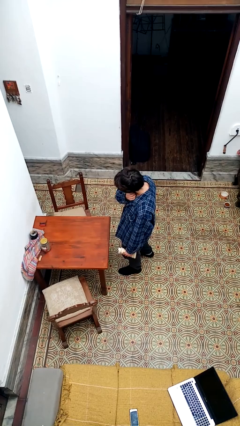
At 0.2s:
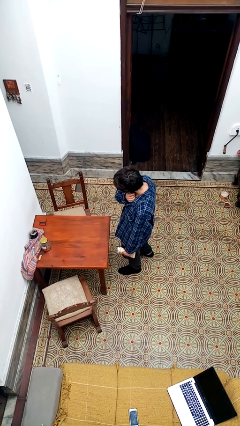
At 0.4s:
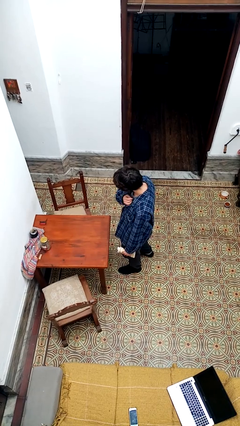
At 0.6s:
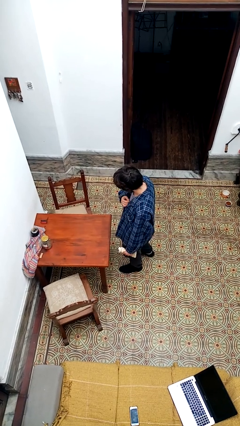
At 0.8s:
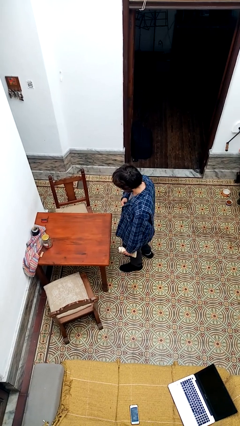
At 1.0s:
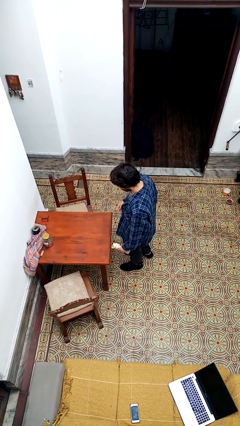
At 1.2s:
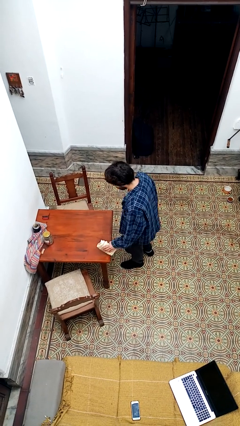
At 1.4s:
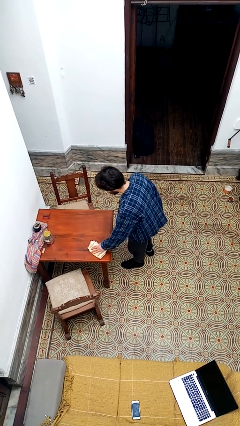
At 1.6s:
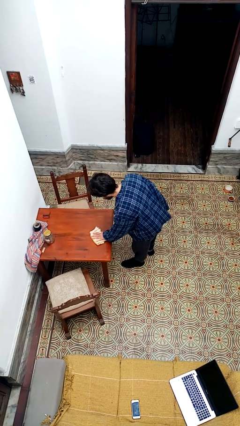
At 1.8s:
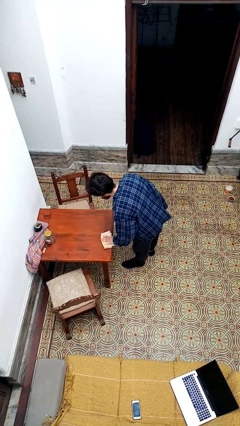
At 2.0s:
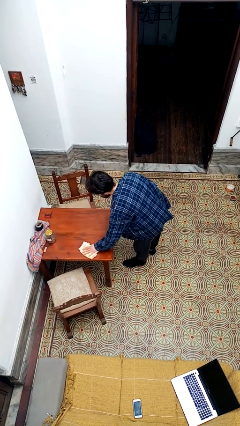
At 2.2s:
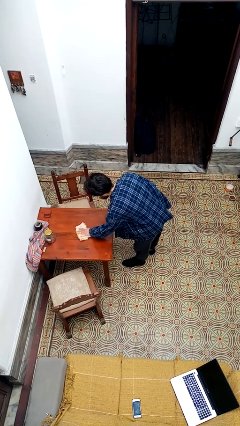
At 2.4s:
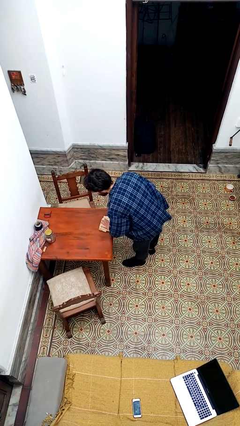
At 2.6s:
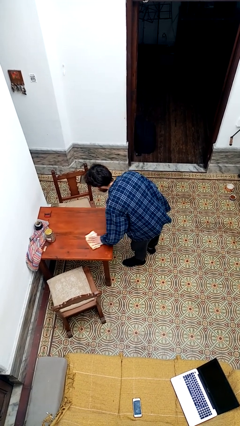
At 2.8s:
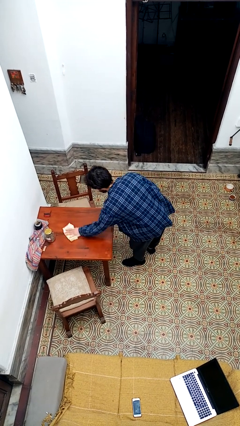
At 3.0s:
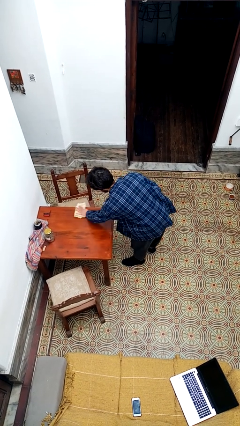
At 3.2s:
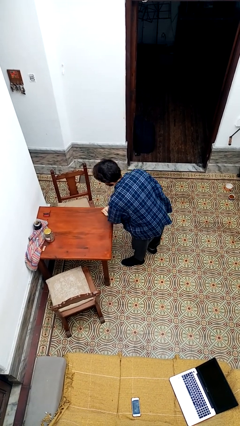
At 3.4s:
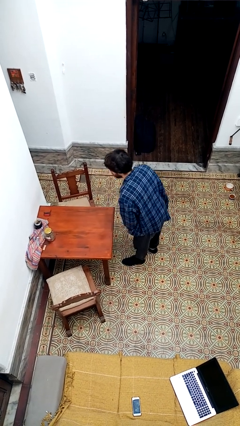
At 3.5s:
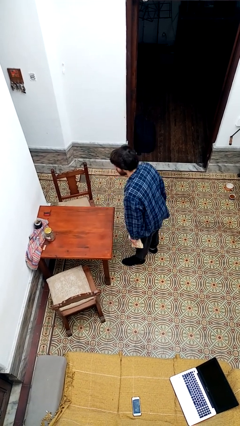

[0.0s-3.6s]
person cleans table with rag

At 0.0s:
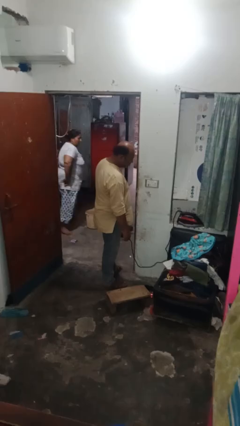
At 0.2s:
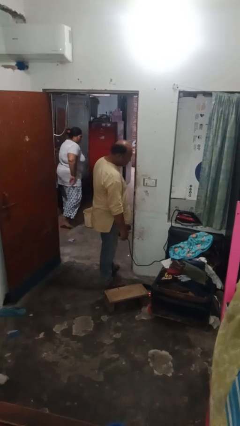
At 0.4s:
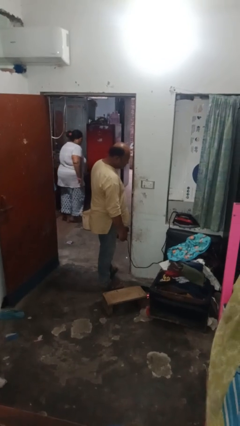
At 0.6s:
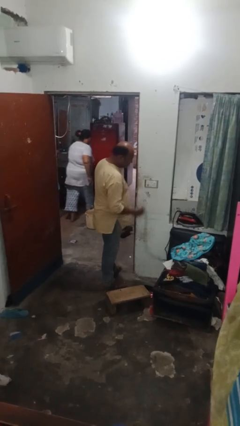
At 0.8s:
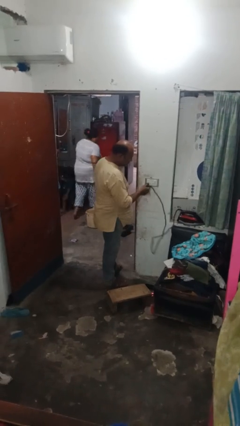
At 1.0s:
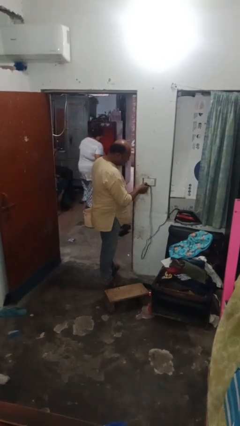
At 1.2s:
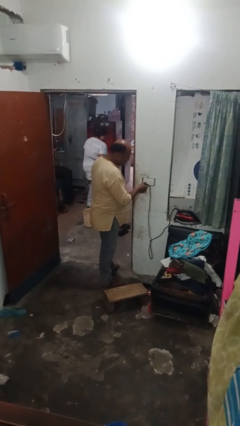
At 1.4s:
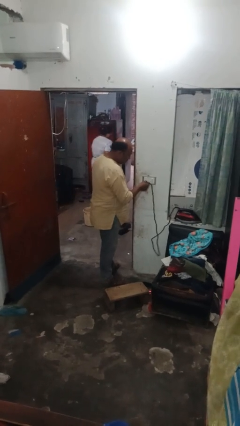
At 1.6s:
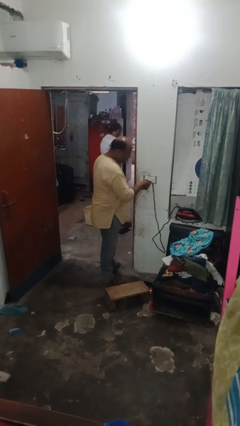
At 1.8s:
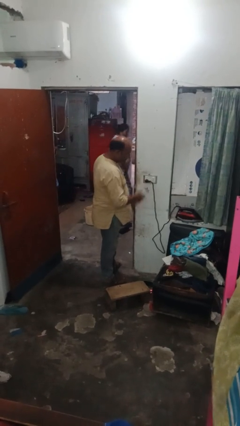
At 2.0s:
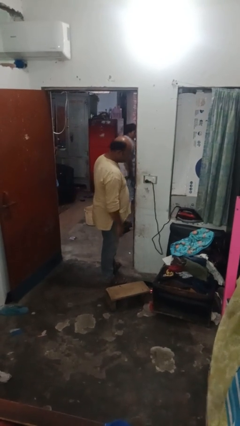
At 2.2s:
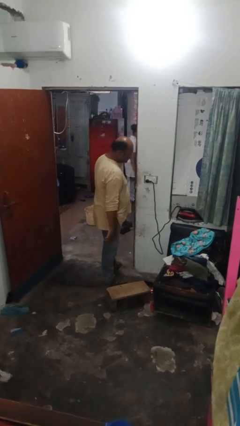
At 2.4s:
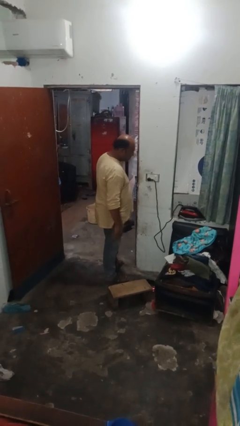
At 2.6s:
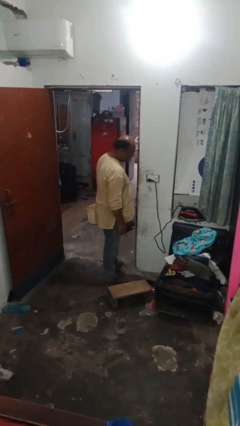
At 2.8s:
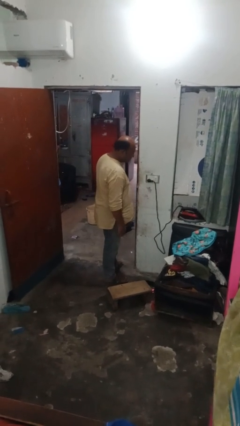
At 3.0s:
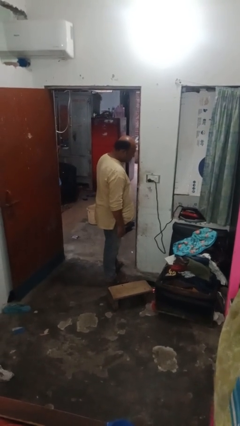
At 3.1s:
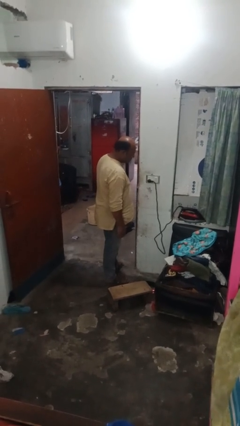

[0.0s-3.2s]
person plugs into electrical socket

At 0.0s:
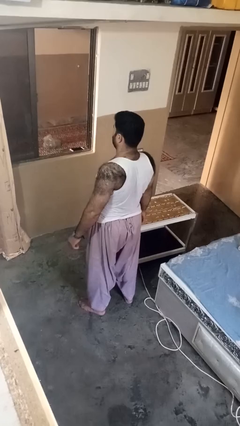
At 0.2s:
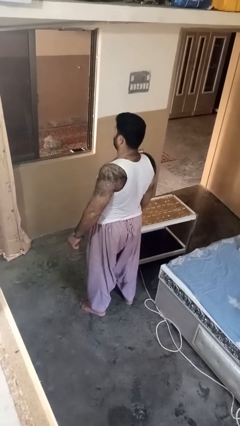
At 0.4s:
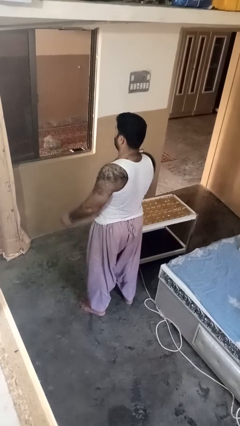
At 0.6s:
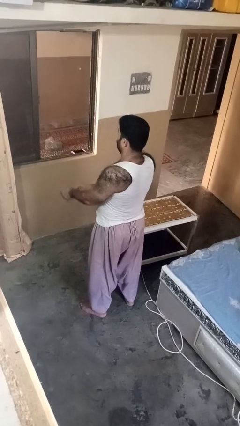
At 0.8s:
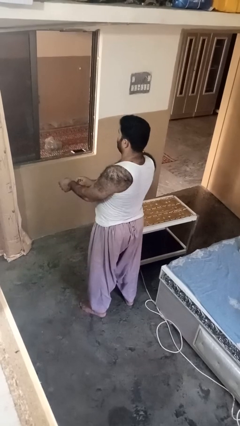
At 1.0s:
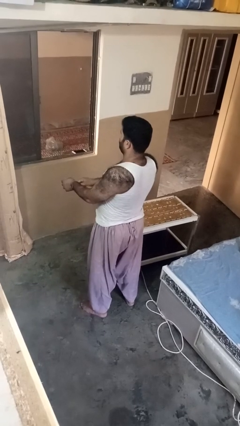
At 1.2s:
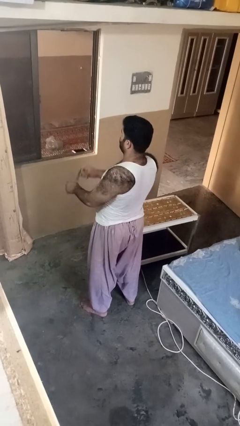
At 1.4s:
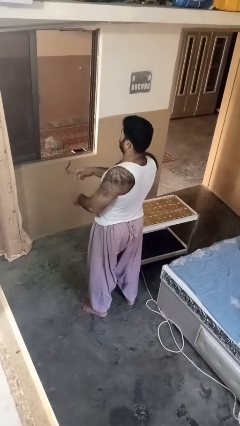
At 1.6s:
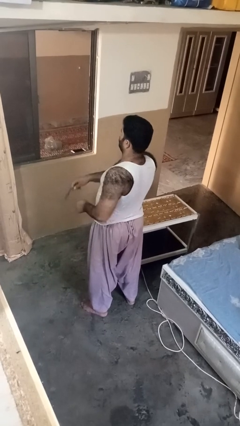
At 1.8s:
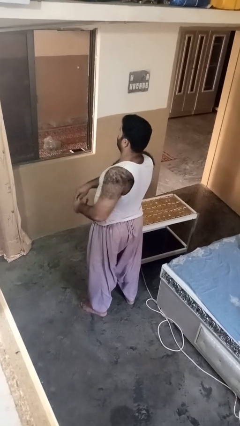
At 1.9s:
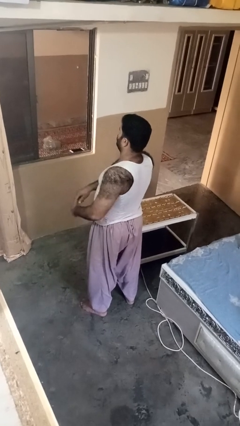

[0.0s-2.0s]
person takes off wristwatch

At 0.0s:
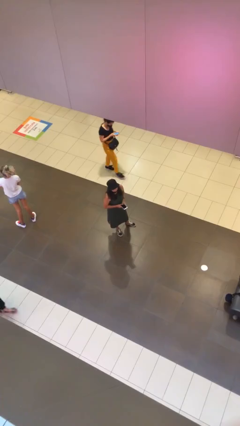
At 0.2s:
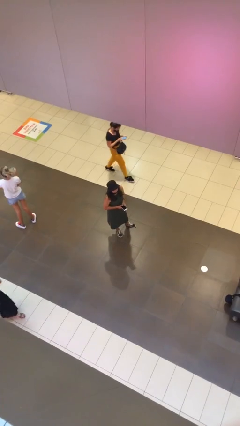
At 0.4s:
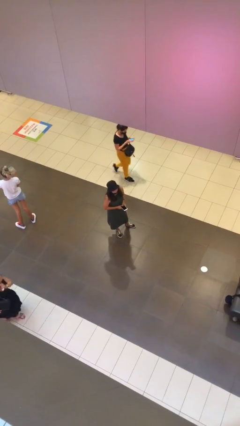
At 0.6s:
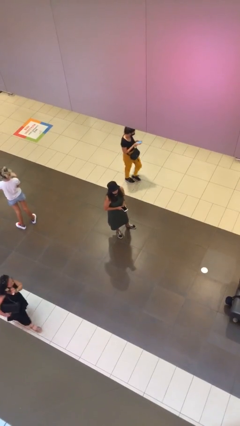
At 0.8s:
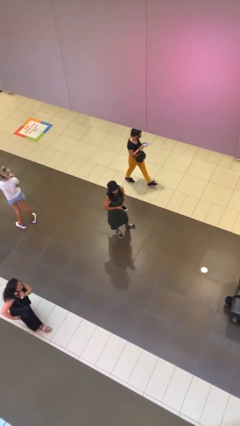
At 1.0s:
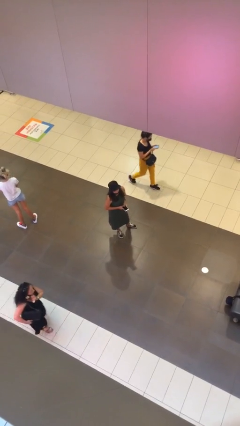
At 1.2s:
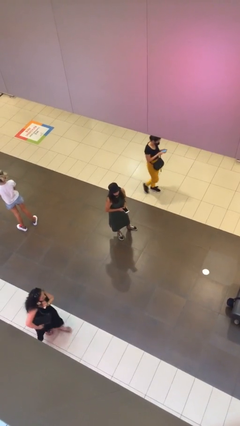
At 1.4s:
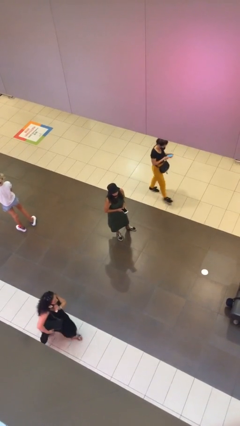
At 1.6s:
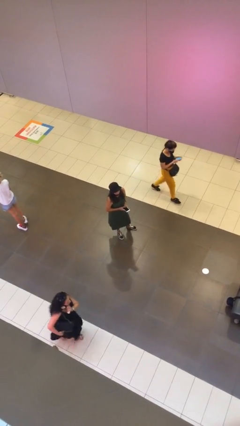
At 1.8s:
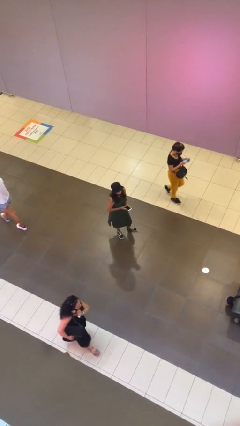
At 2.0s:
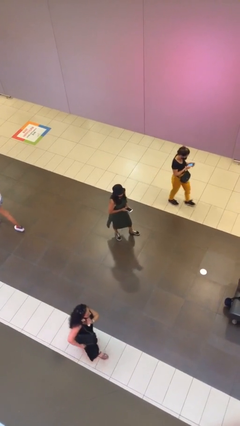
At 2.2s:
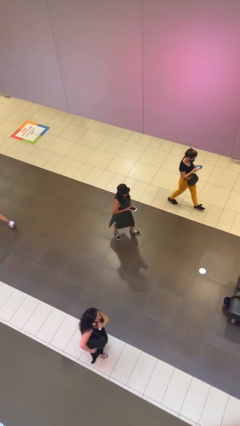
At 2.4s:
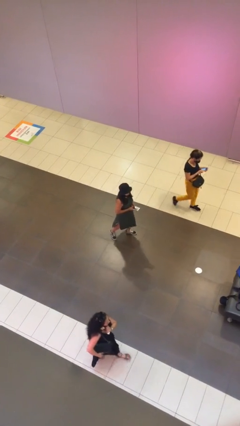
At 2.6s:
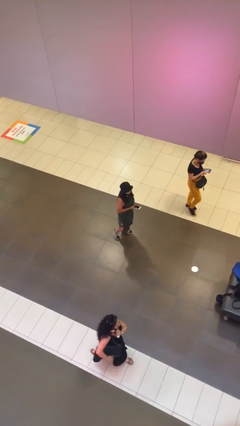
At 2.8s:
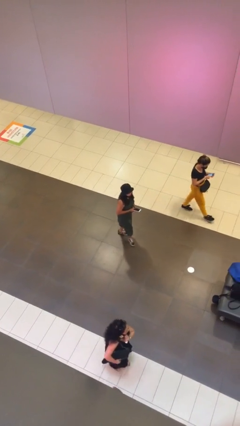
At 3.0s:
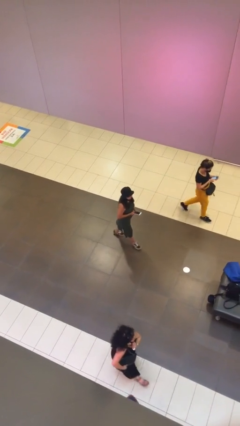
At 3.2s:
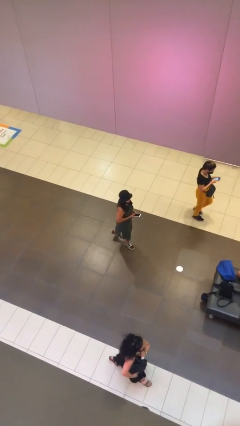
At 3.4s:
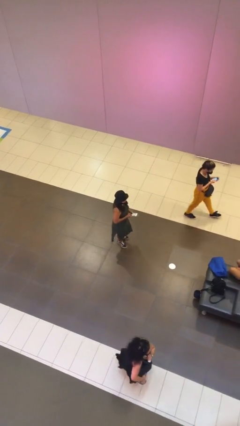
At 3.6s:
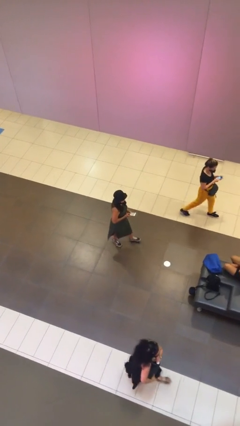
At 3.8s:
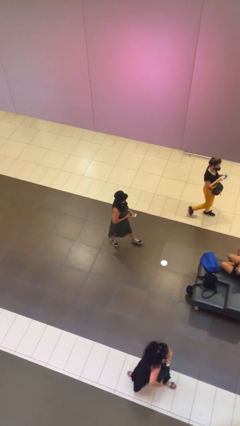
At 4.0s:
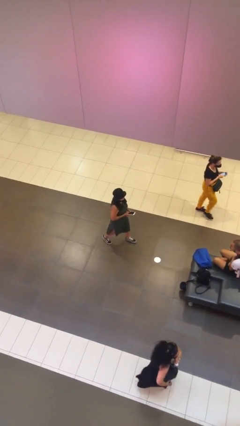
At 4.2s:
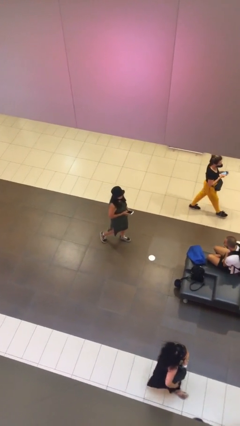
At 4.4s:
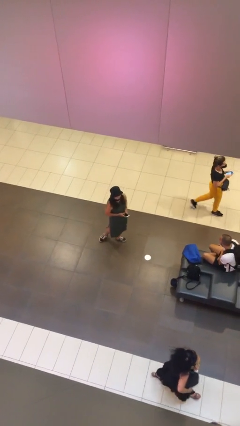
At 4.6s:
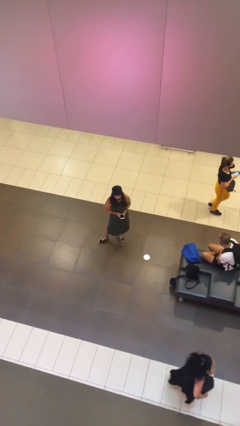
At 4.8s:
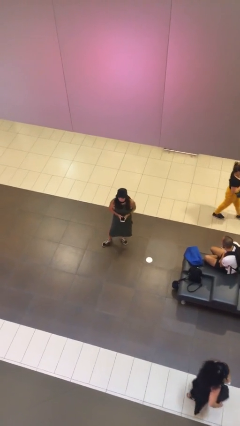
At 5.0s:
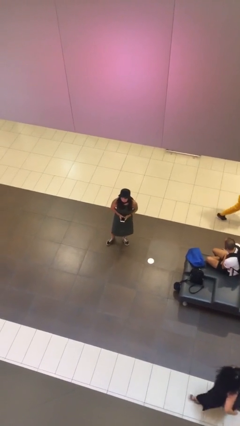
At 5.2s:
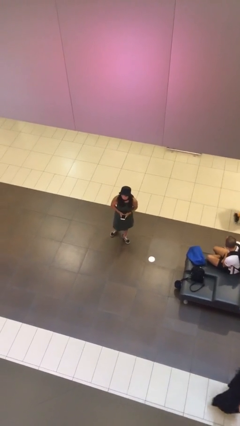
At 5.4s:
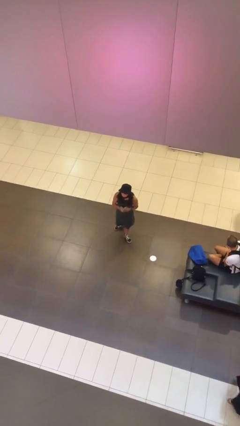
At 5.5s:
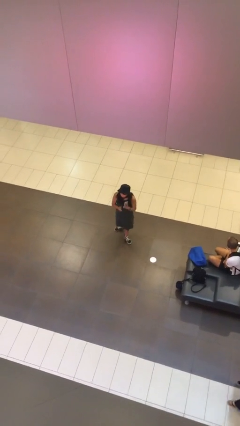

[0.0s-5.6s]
person texts on phone

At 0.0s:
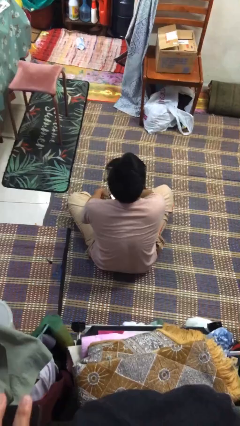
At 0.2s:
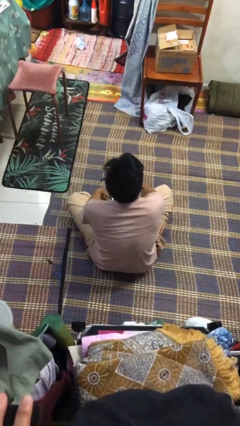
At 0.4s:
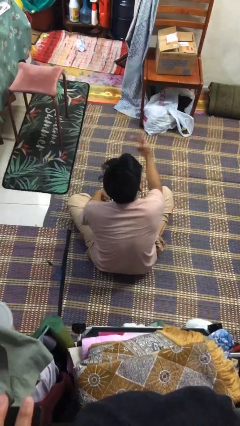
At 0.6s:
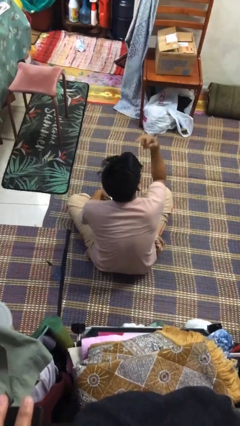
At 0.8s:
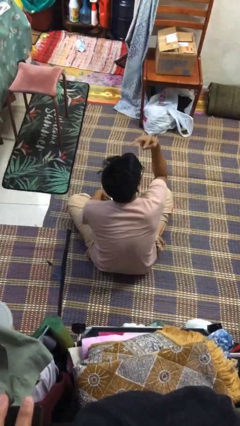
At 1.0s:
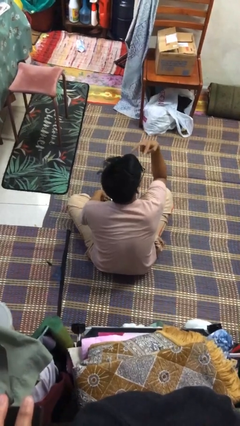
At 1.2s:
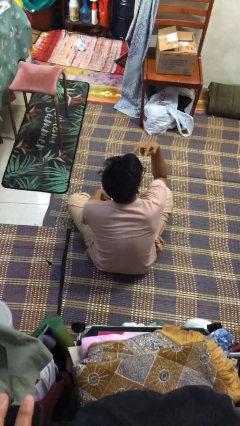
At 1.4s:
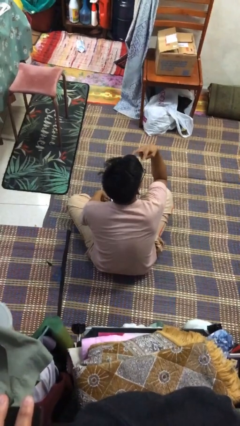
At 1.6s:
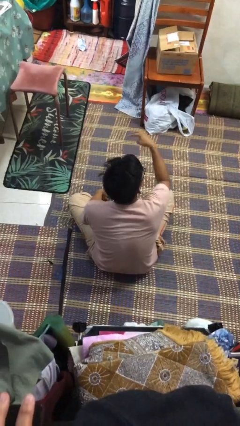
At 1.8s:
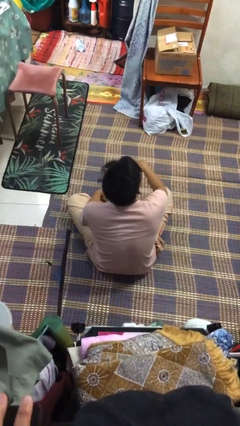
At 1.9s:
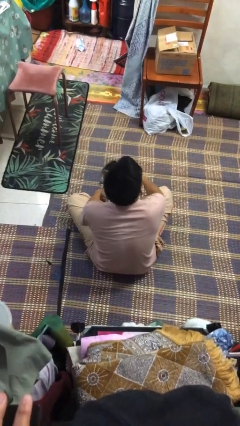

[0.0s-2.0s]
person gestures watch closely

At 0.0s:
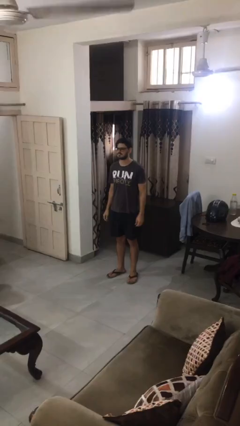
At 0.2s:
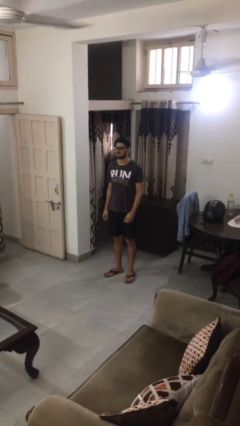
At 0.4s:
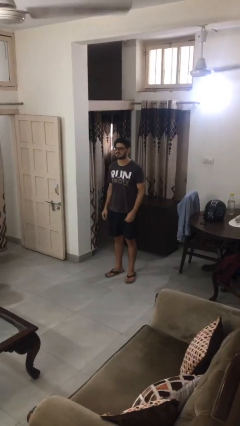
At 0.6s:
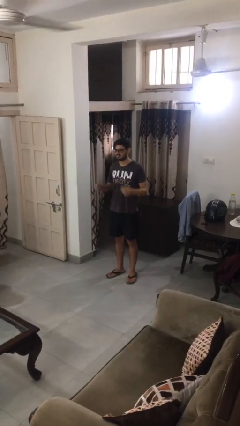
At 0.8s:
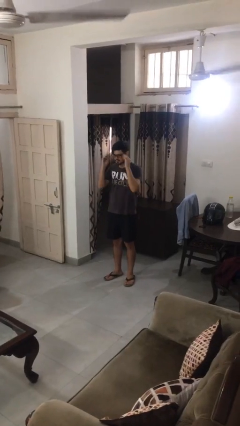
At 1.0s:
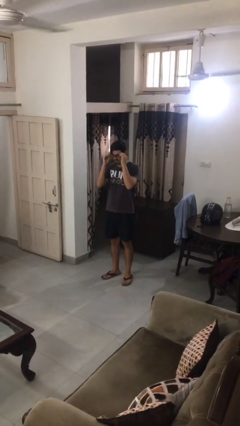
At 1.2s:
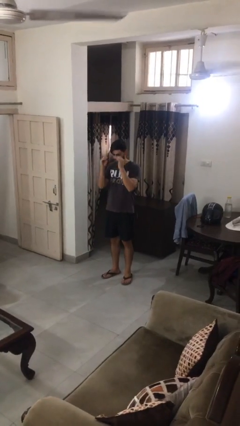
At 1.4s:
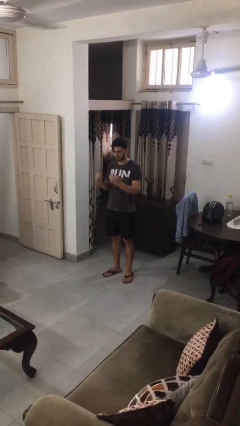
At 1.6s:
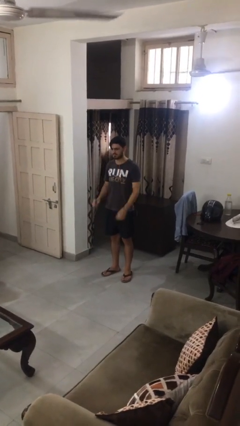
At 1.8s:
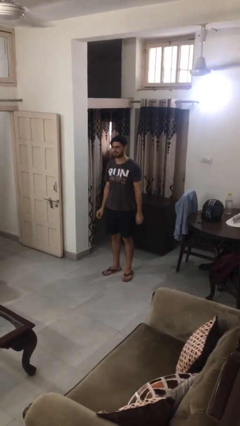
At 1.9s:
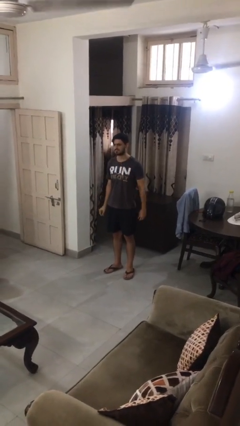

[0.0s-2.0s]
person takes off glasses
